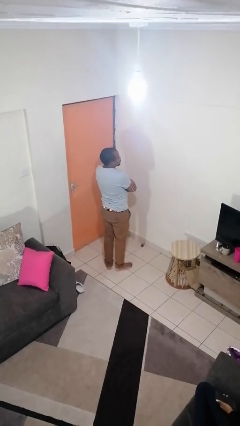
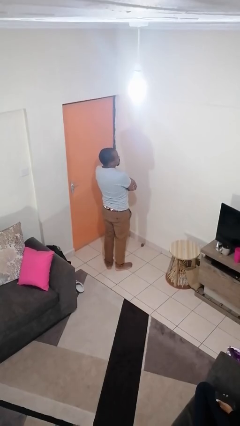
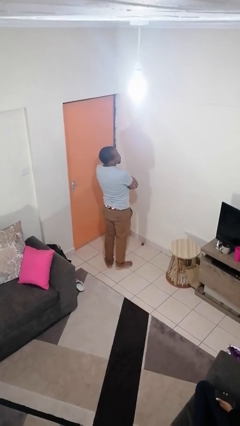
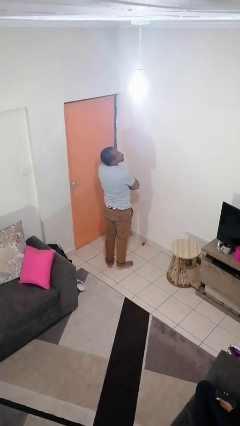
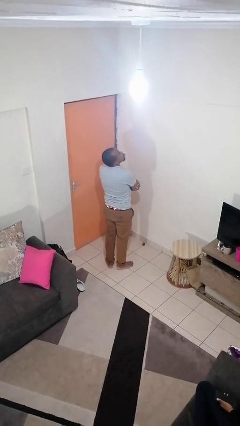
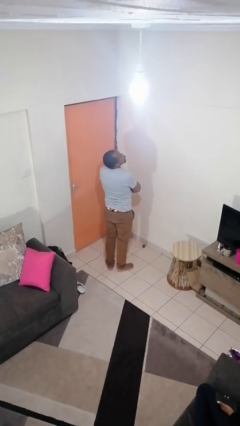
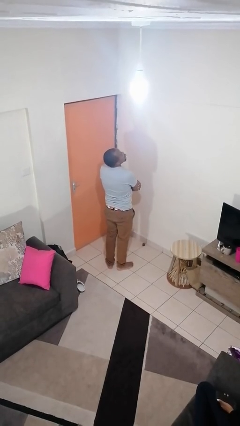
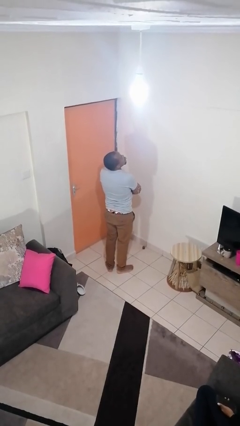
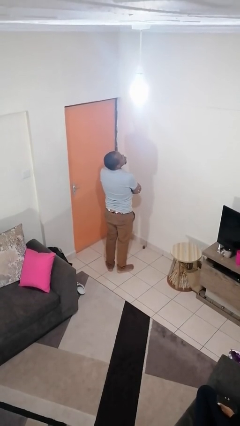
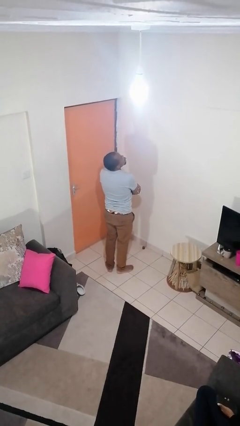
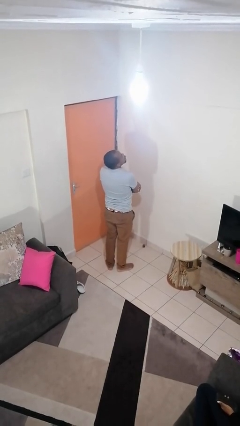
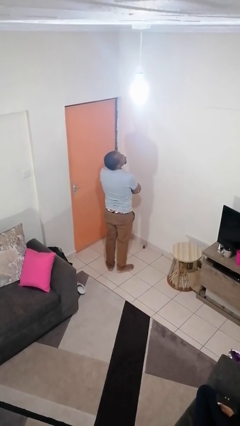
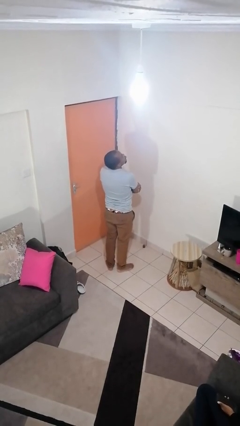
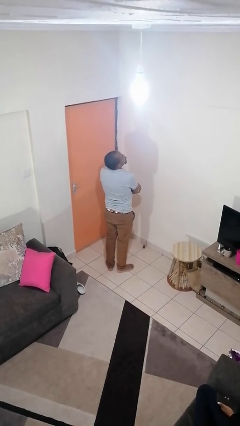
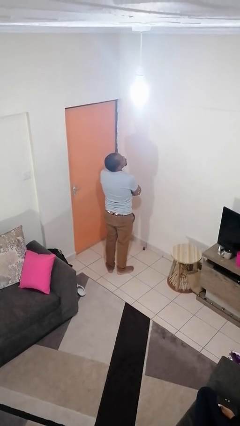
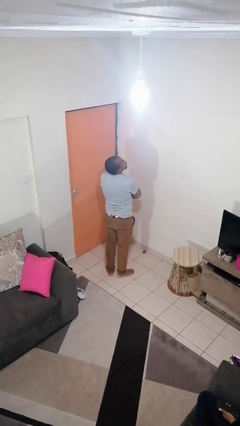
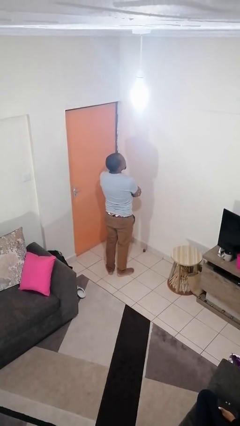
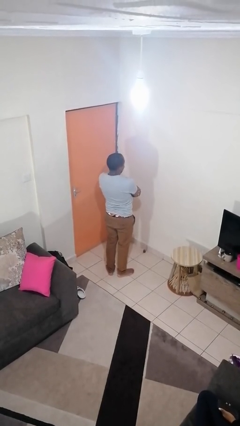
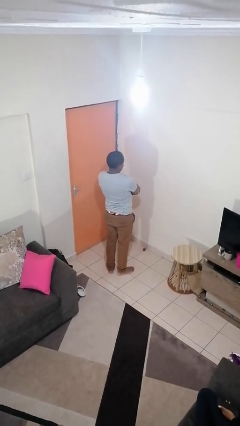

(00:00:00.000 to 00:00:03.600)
person sticks out tongue

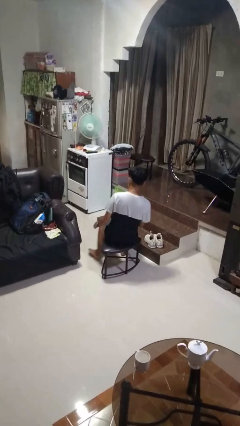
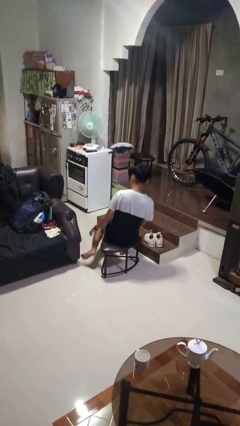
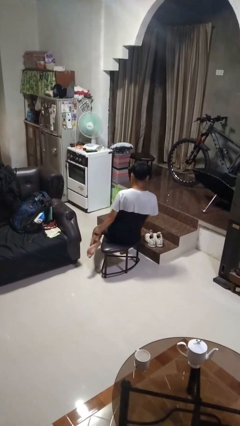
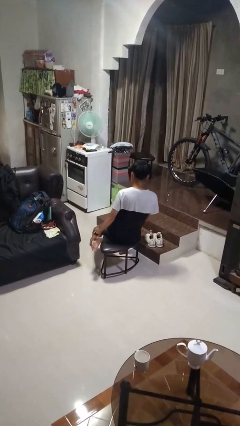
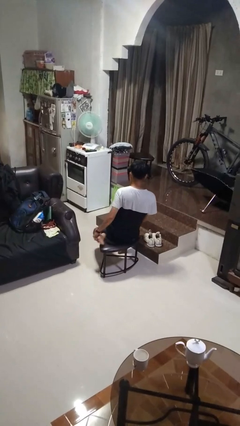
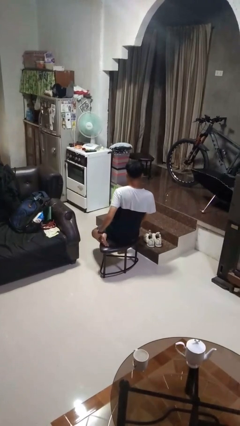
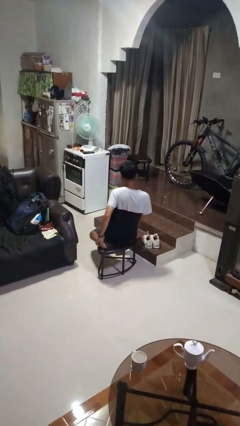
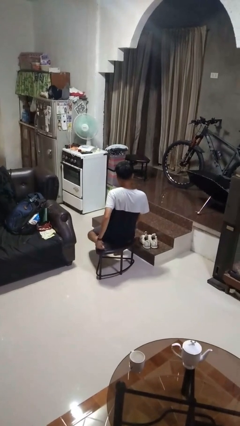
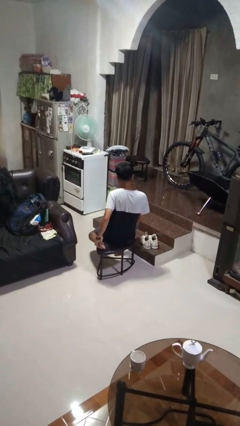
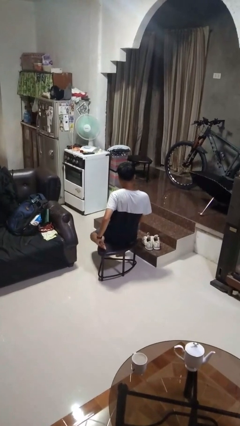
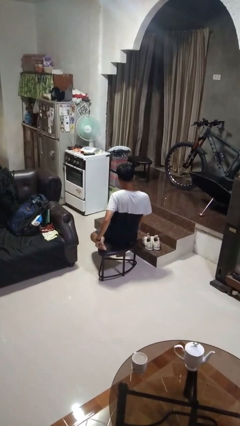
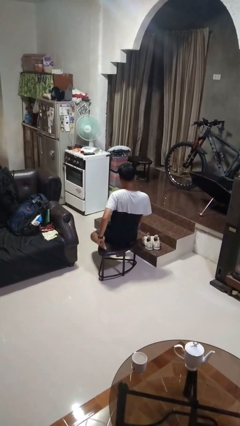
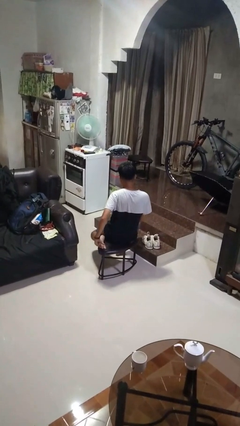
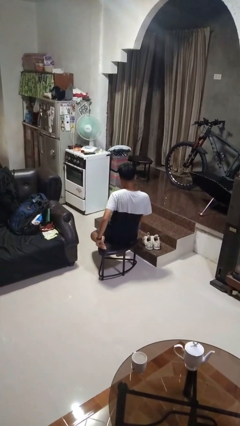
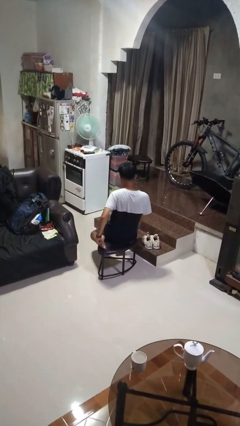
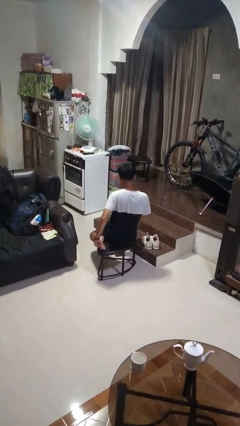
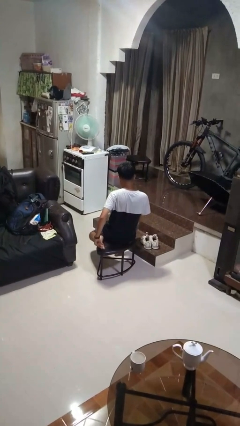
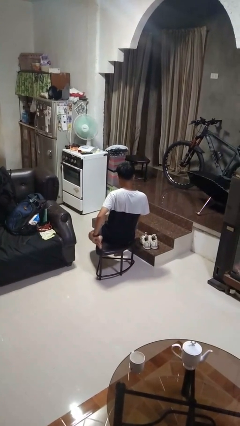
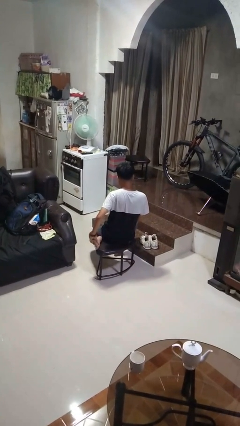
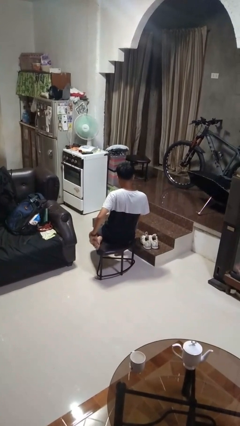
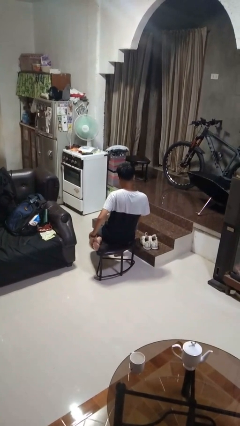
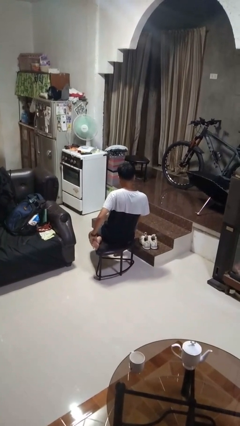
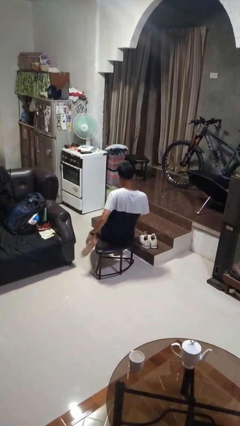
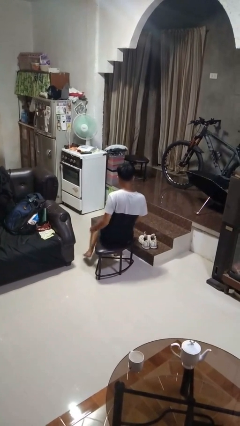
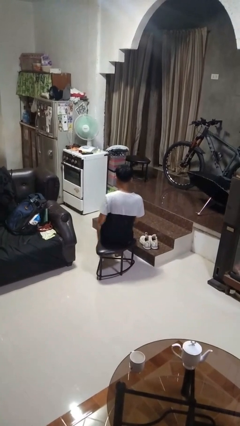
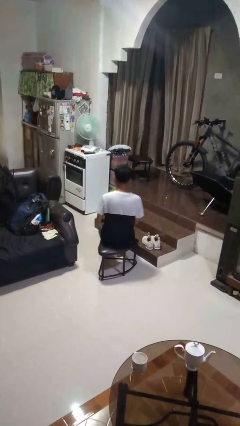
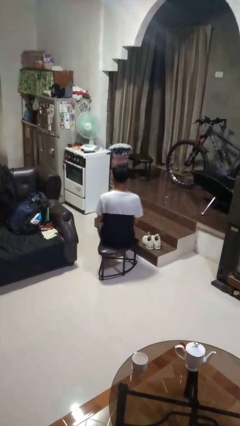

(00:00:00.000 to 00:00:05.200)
person rubs foot

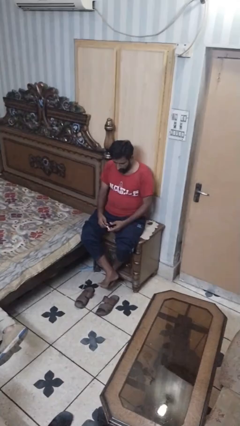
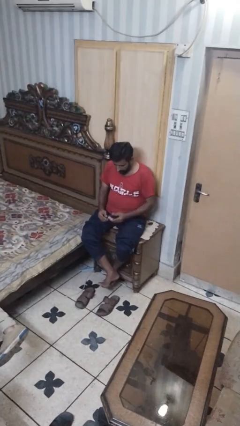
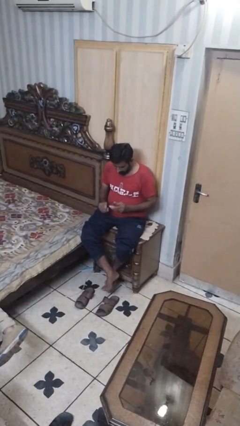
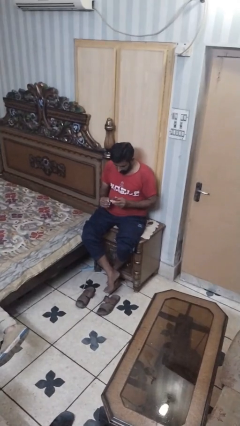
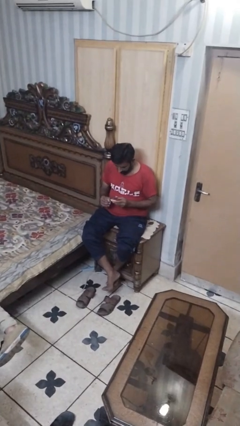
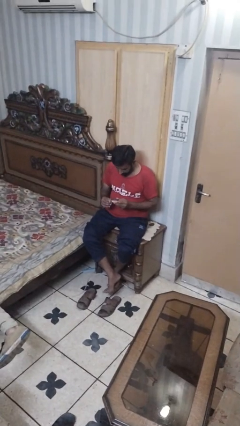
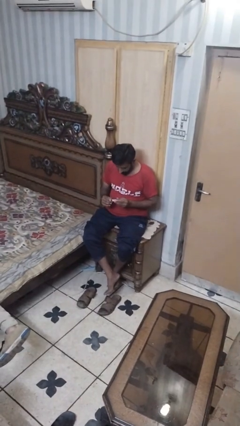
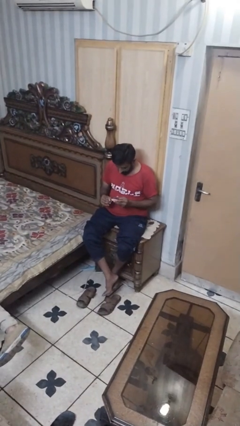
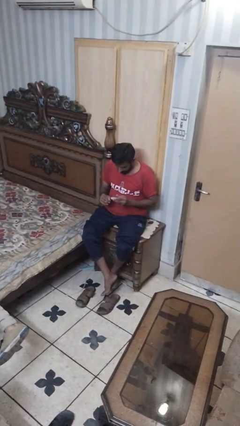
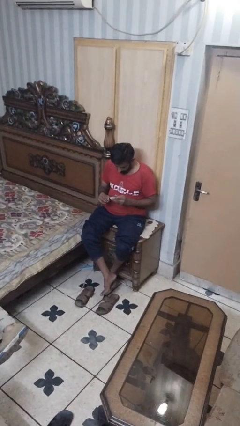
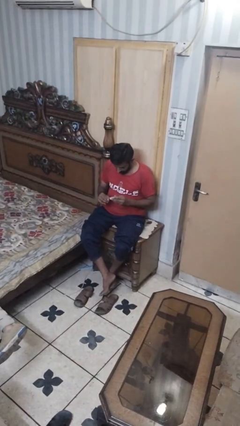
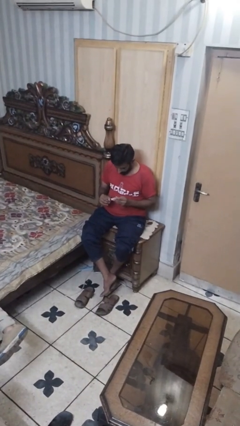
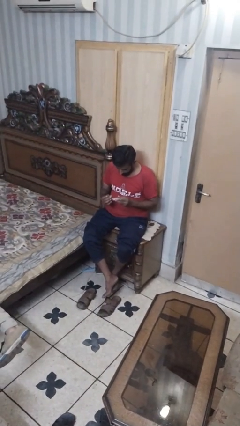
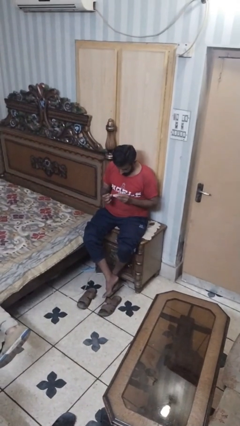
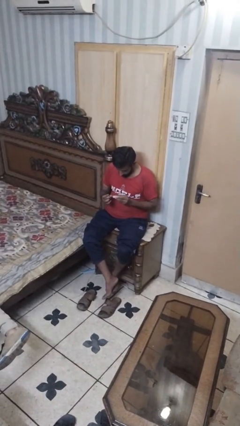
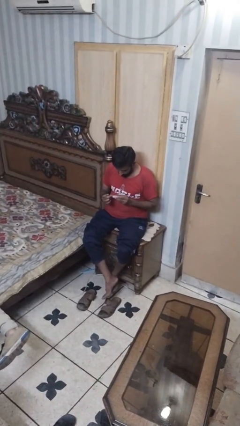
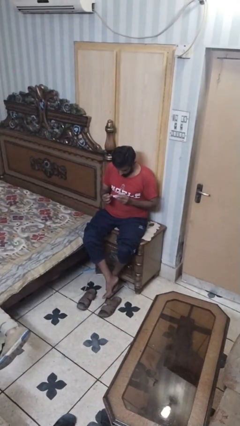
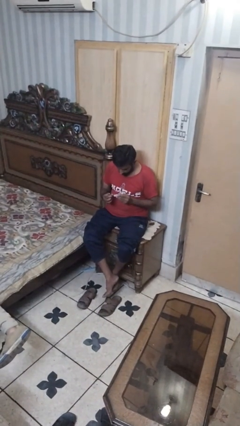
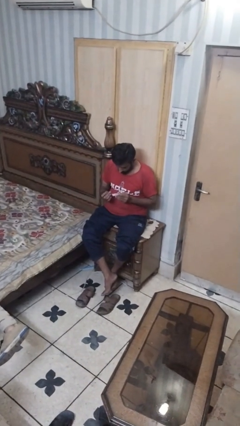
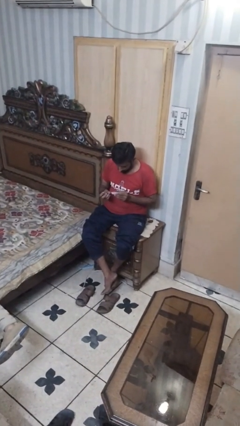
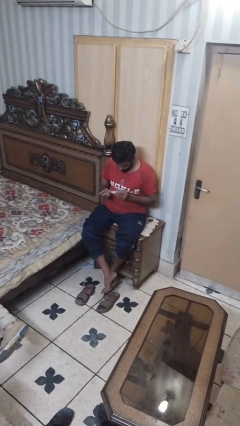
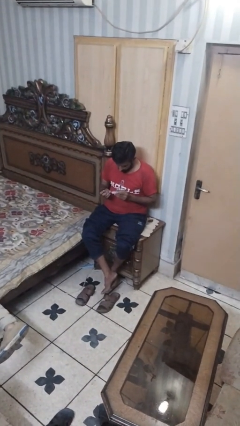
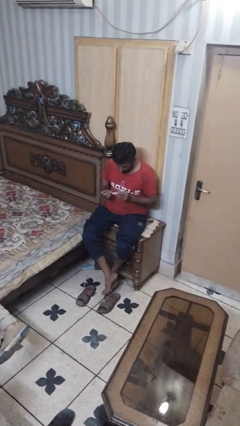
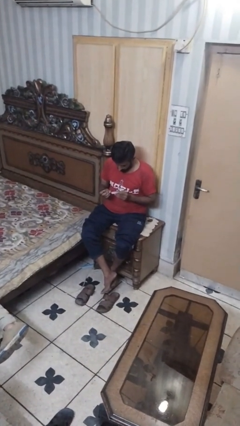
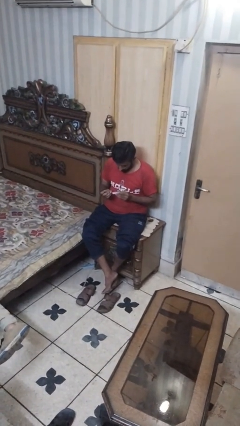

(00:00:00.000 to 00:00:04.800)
person clips fingernails

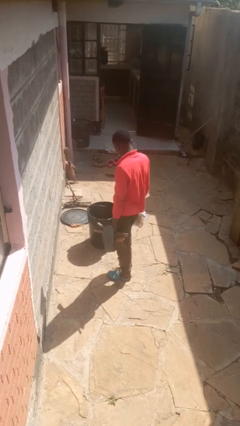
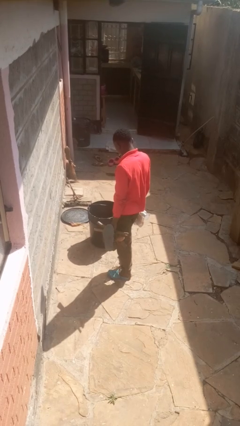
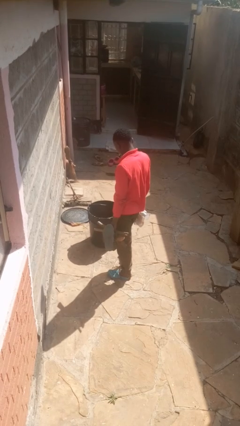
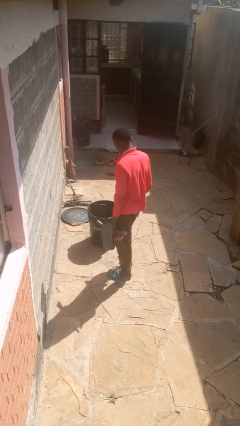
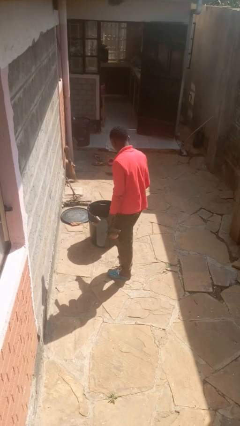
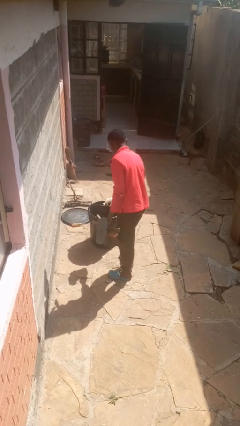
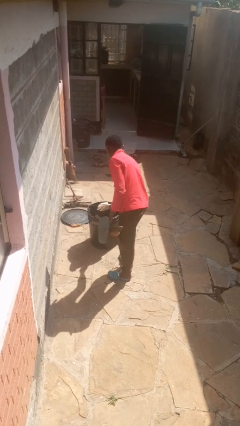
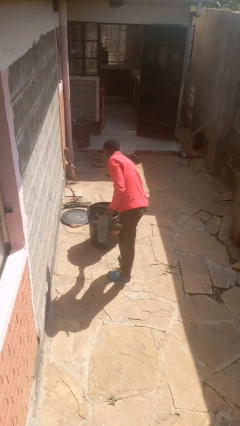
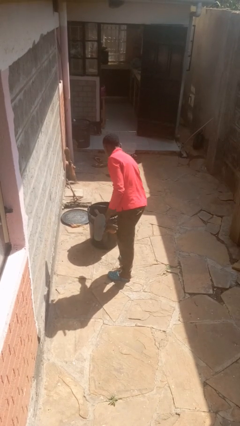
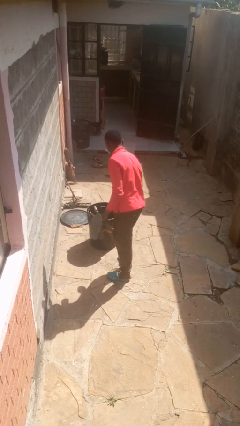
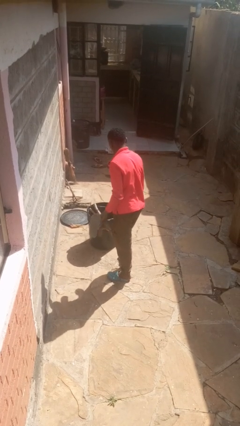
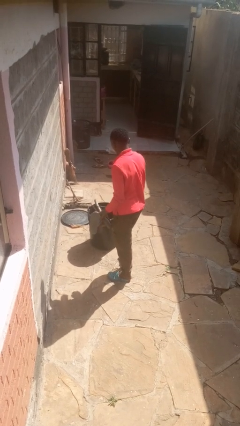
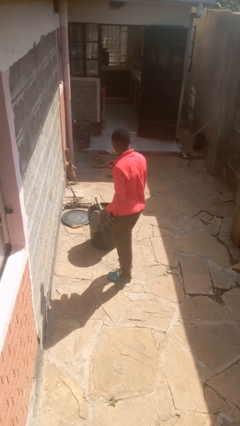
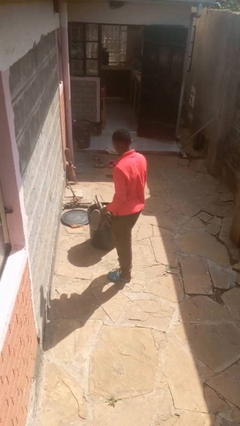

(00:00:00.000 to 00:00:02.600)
person discards trash

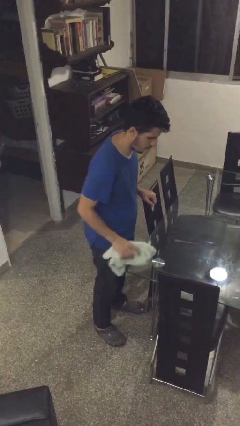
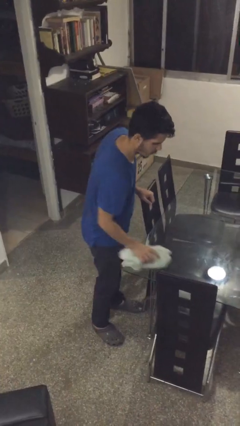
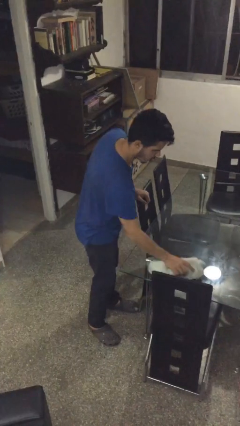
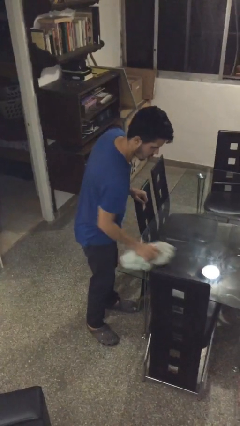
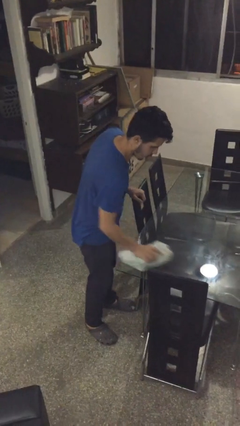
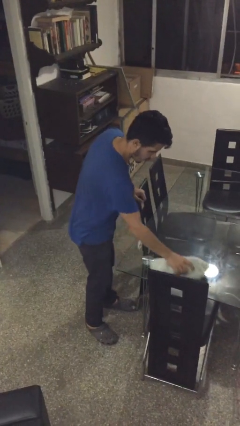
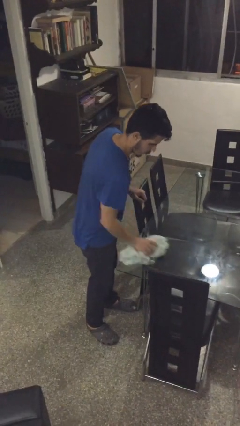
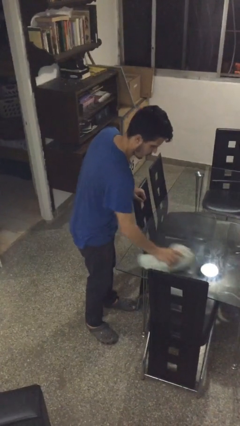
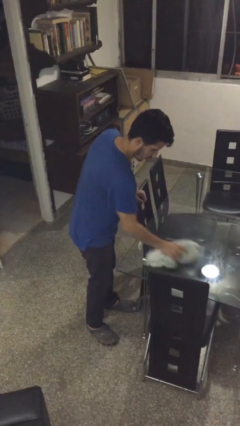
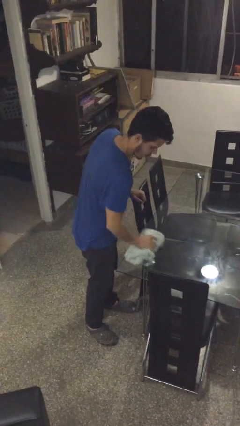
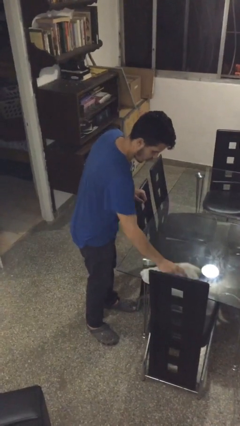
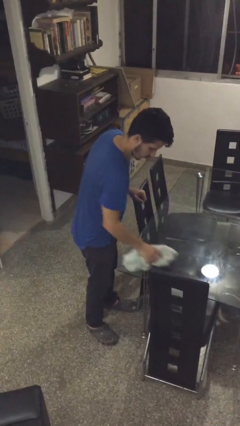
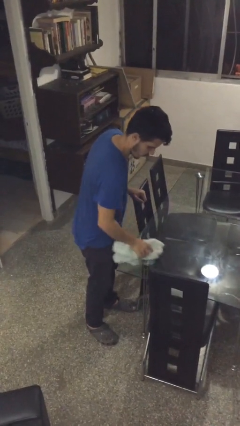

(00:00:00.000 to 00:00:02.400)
person cleans table with rag
